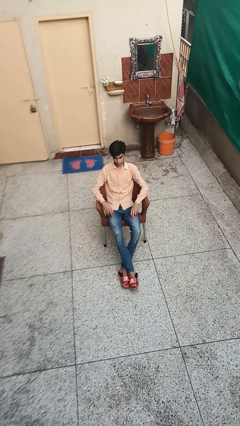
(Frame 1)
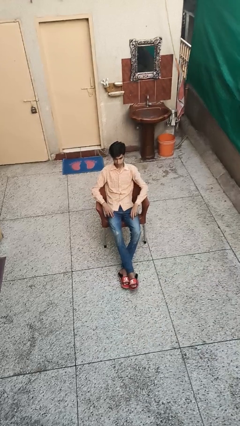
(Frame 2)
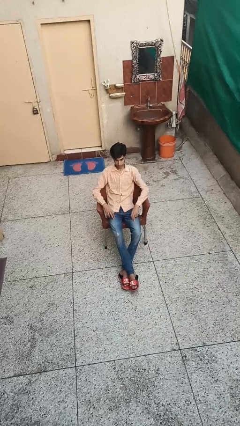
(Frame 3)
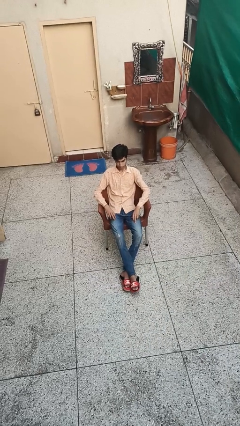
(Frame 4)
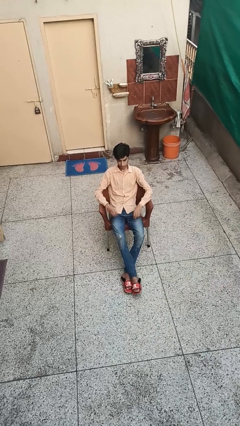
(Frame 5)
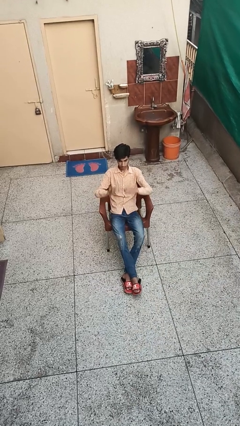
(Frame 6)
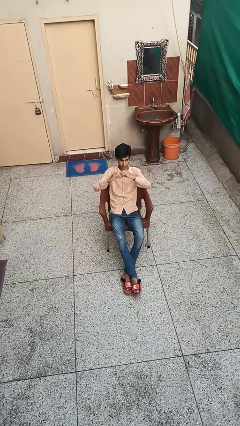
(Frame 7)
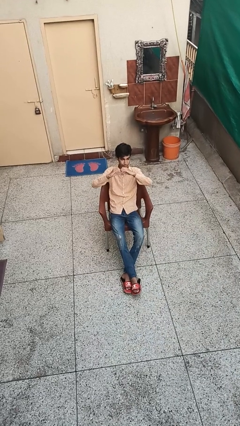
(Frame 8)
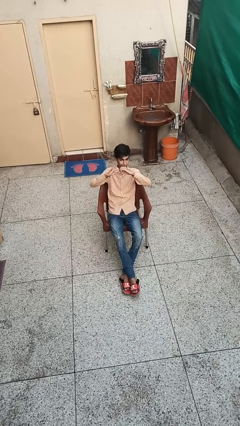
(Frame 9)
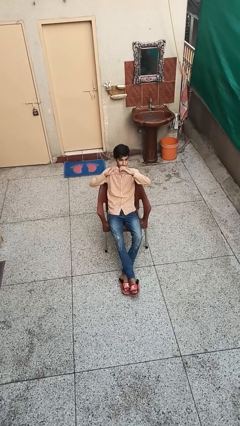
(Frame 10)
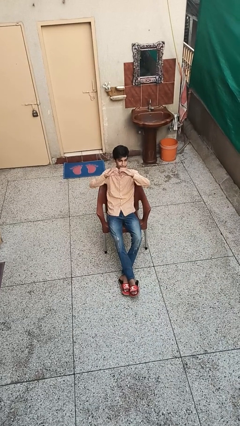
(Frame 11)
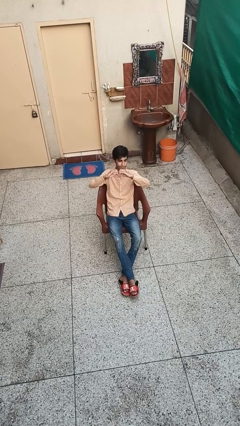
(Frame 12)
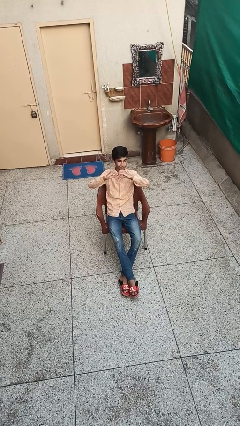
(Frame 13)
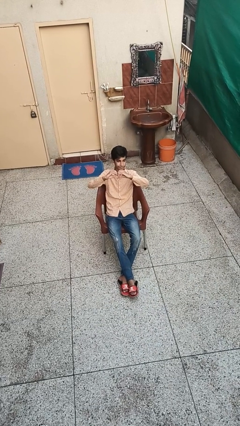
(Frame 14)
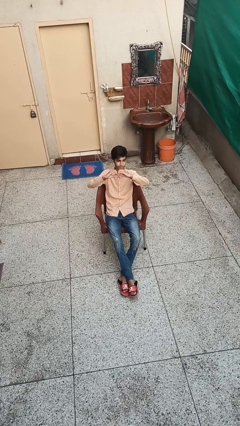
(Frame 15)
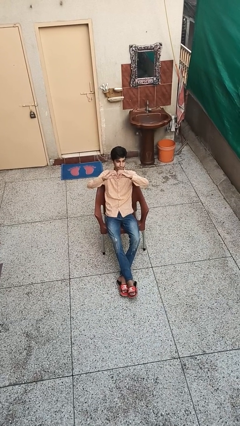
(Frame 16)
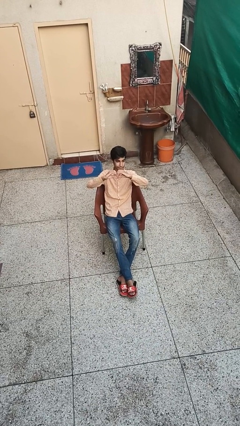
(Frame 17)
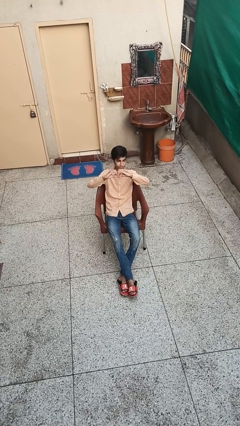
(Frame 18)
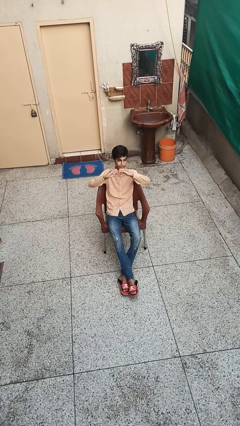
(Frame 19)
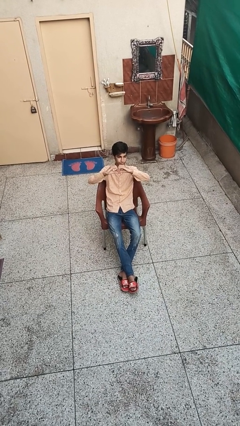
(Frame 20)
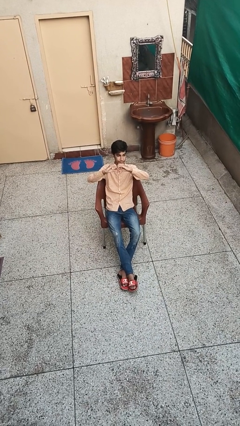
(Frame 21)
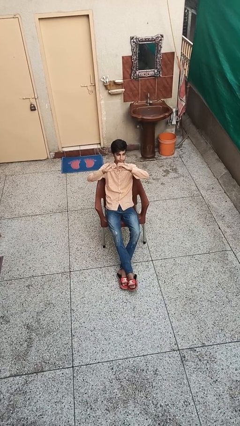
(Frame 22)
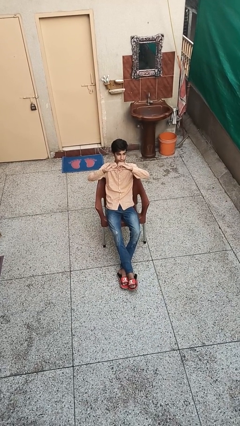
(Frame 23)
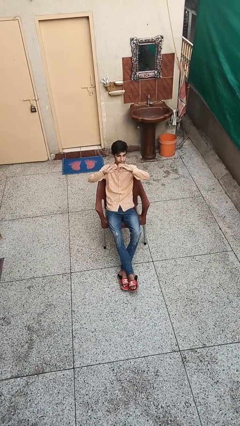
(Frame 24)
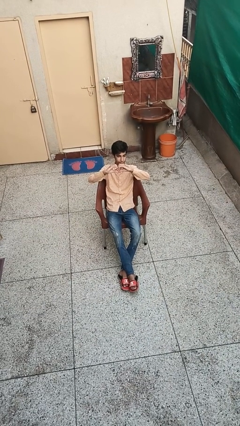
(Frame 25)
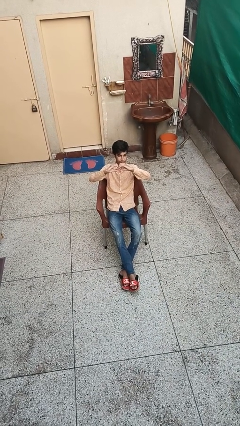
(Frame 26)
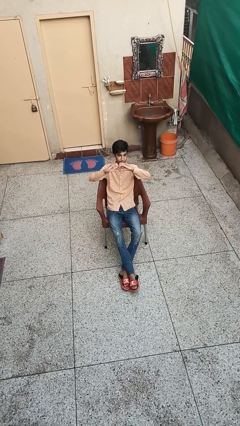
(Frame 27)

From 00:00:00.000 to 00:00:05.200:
person gestures heart

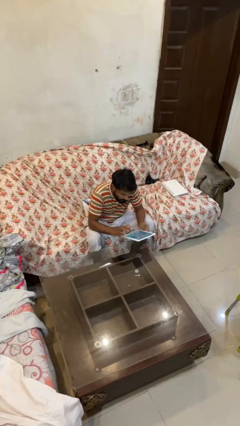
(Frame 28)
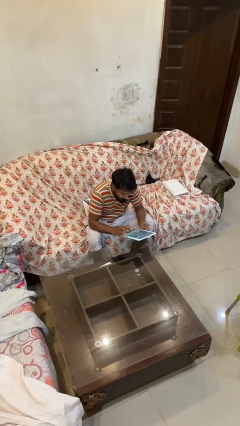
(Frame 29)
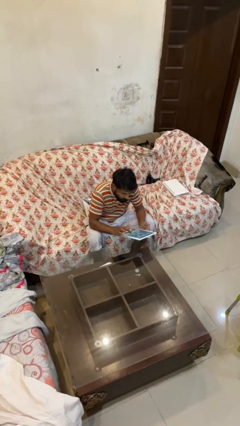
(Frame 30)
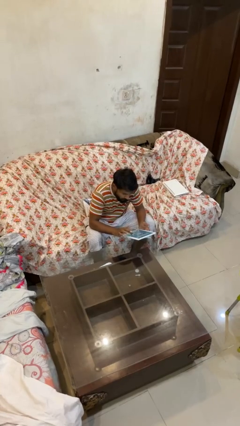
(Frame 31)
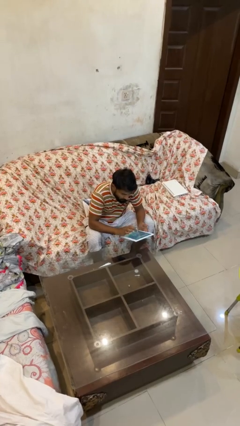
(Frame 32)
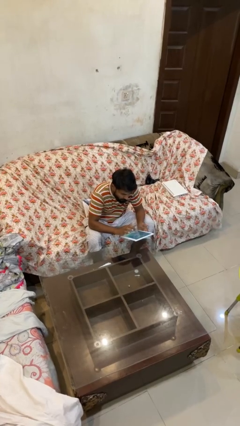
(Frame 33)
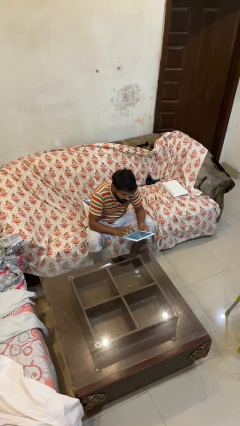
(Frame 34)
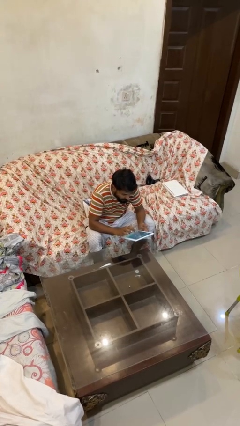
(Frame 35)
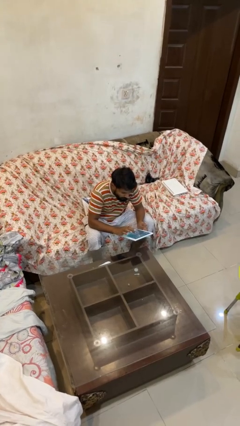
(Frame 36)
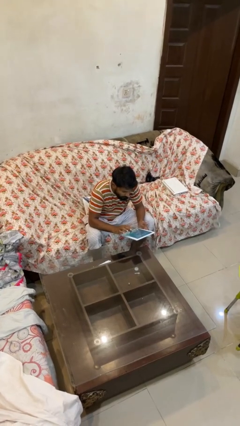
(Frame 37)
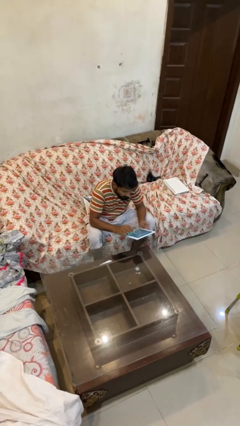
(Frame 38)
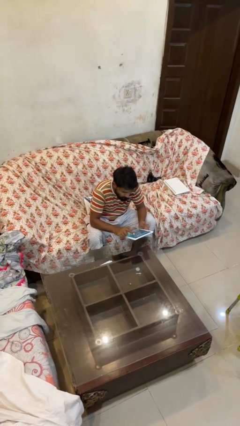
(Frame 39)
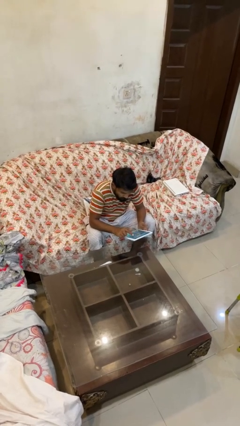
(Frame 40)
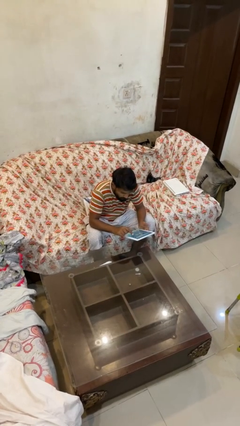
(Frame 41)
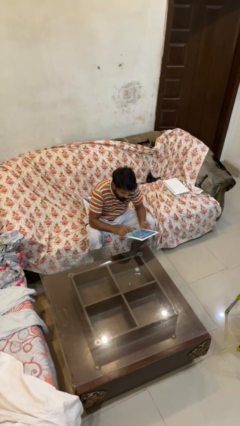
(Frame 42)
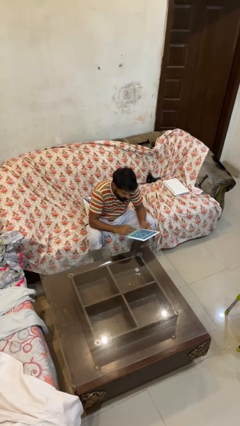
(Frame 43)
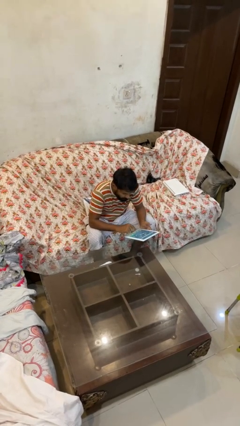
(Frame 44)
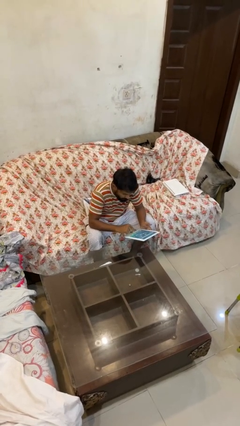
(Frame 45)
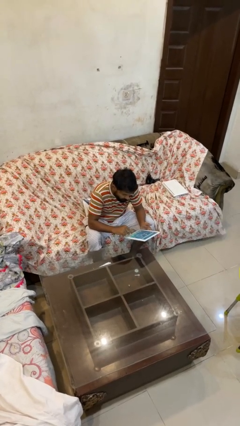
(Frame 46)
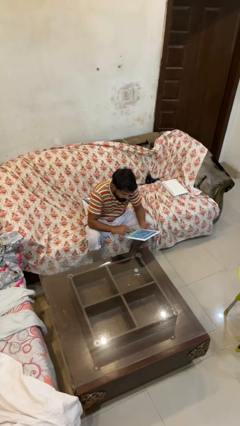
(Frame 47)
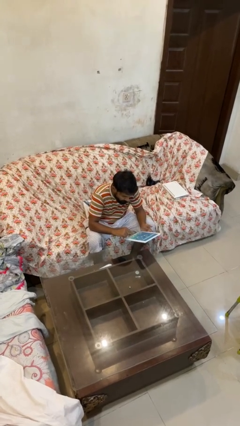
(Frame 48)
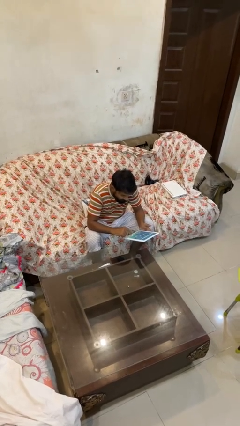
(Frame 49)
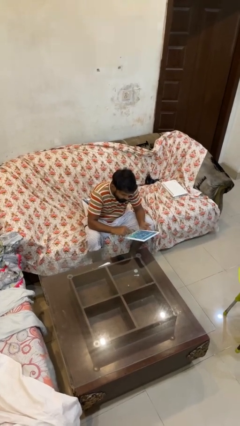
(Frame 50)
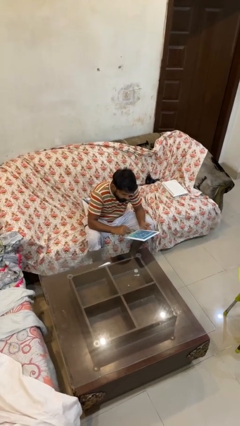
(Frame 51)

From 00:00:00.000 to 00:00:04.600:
person interacts with tablet

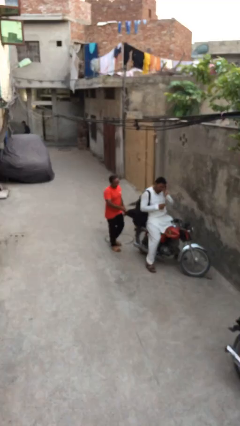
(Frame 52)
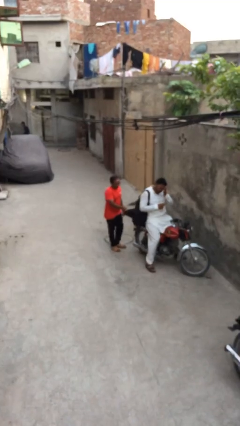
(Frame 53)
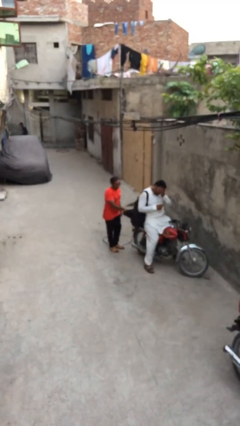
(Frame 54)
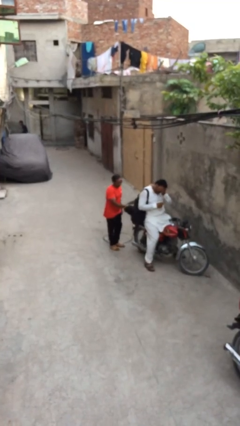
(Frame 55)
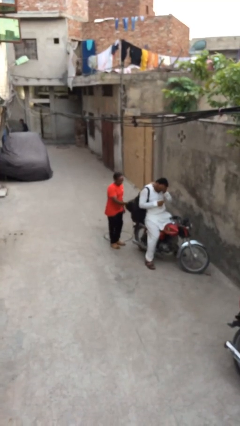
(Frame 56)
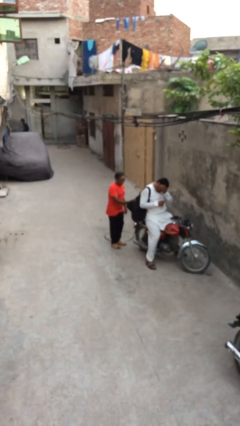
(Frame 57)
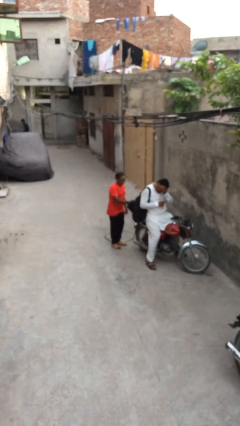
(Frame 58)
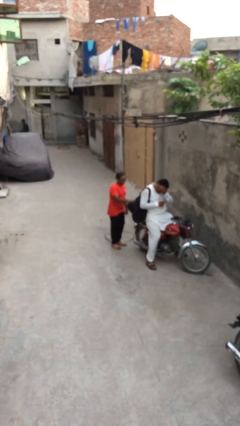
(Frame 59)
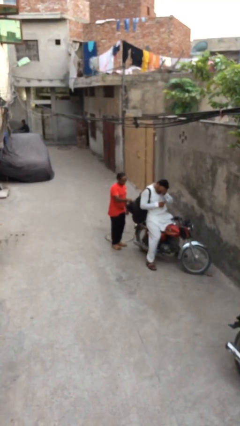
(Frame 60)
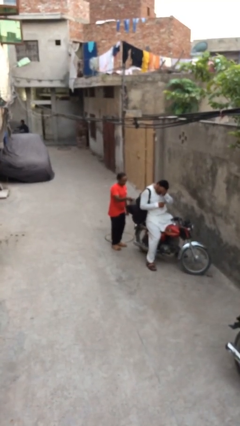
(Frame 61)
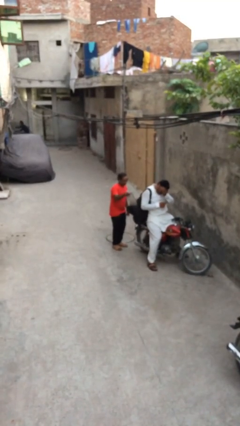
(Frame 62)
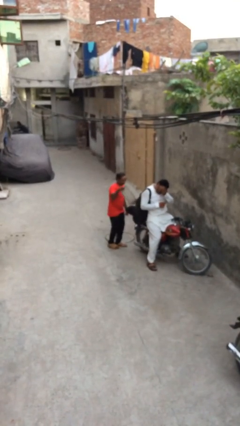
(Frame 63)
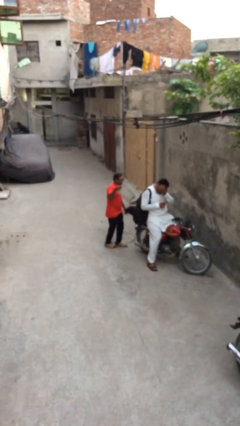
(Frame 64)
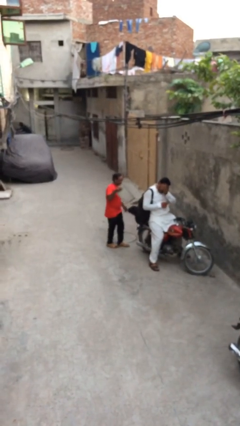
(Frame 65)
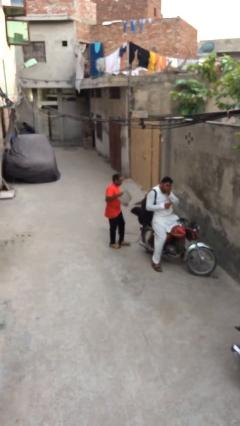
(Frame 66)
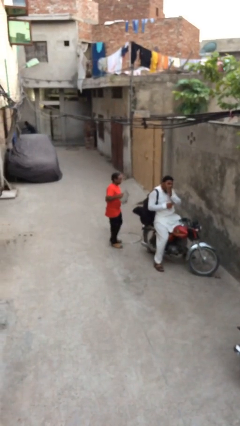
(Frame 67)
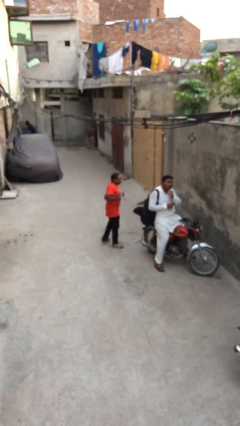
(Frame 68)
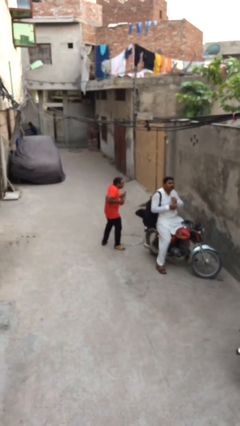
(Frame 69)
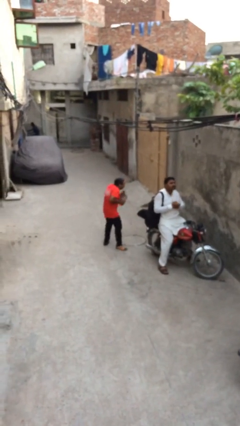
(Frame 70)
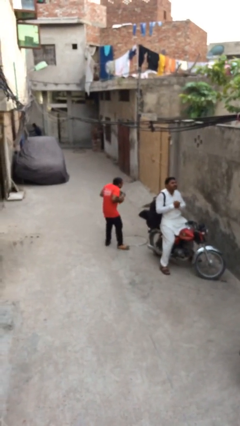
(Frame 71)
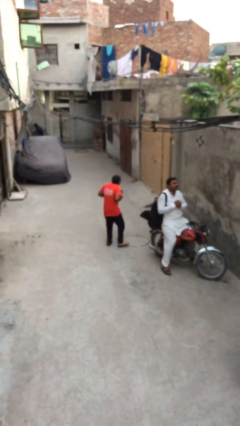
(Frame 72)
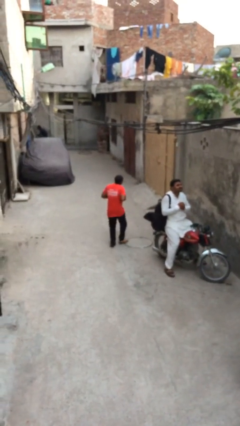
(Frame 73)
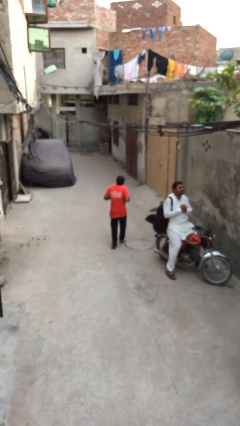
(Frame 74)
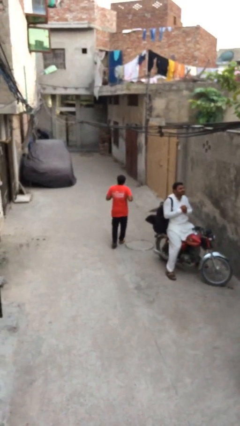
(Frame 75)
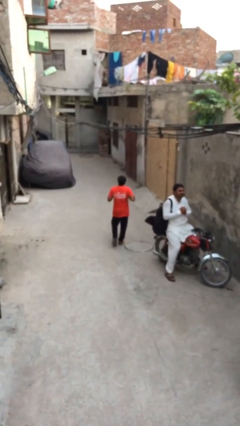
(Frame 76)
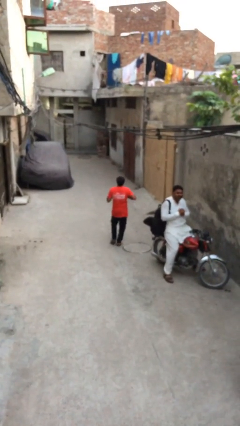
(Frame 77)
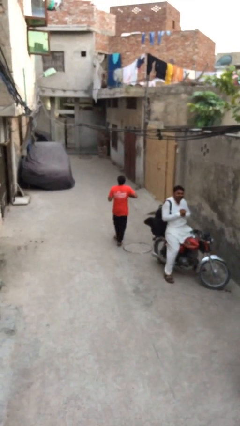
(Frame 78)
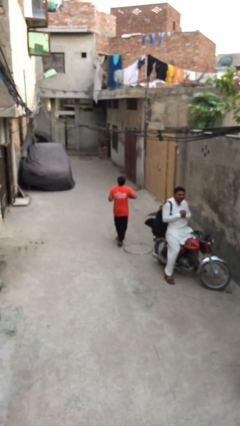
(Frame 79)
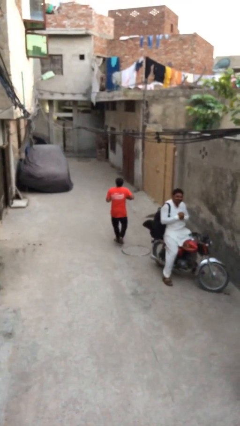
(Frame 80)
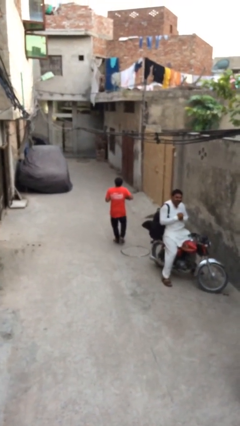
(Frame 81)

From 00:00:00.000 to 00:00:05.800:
person steals object from person

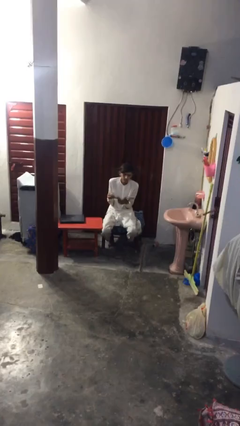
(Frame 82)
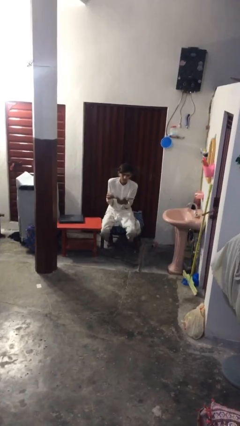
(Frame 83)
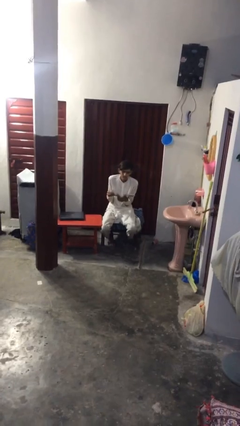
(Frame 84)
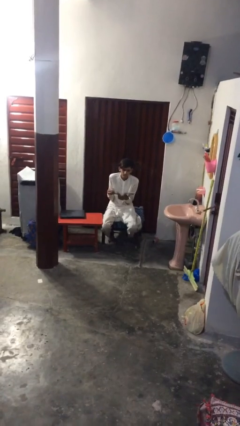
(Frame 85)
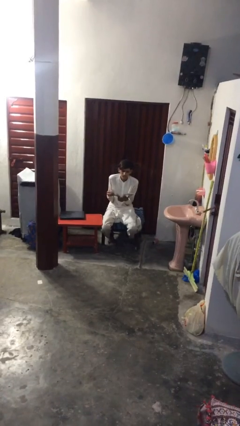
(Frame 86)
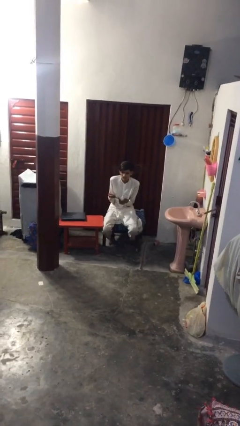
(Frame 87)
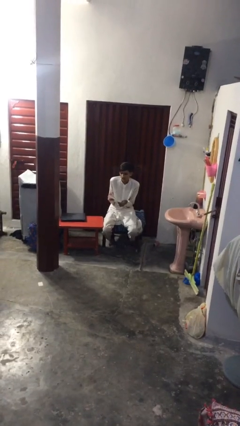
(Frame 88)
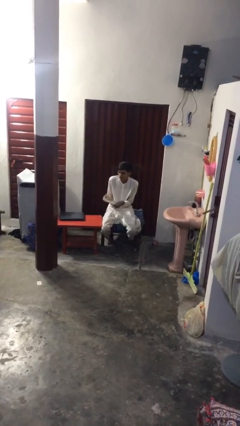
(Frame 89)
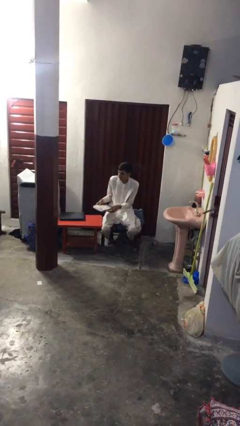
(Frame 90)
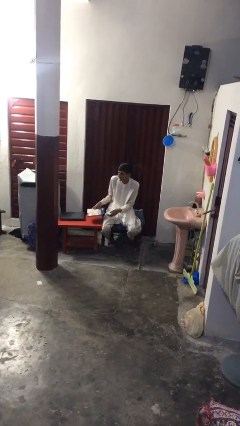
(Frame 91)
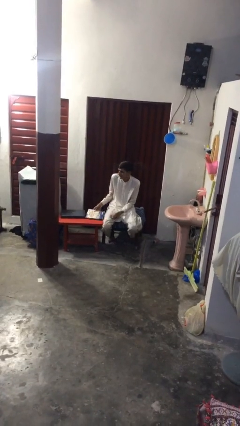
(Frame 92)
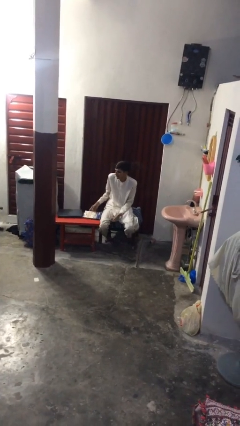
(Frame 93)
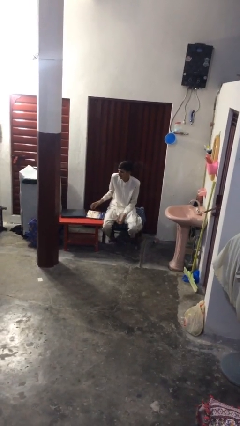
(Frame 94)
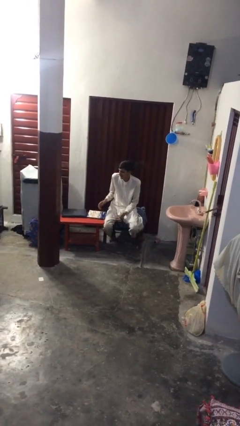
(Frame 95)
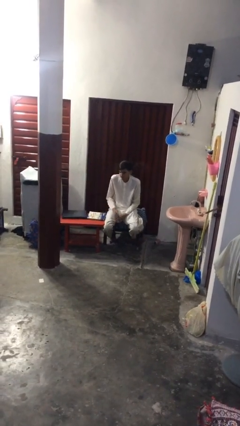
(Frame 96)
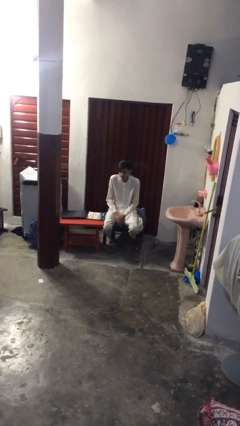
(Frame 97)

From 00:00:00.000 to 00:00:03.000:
person puts down object on table
